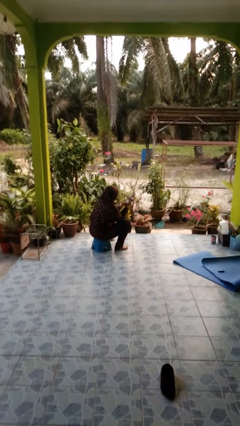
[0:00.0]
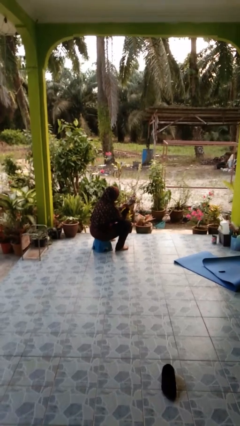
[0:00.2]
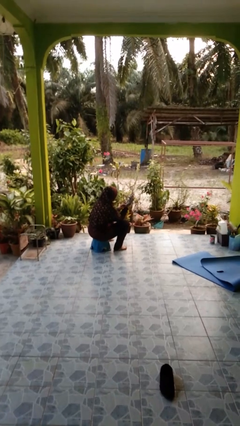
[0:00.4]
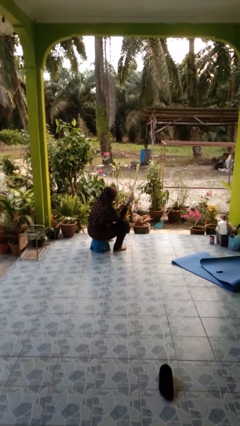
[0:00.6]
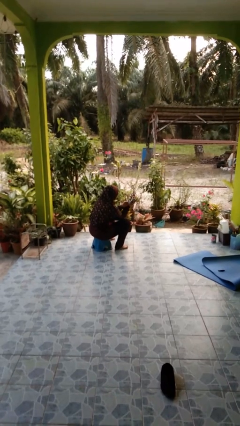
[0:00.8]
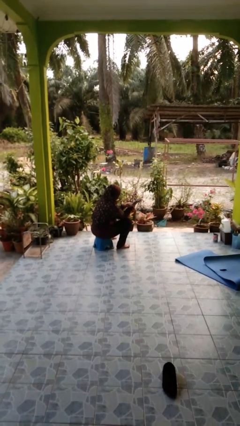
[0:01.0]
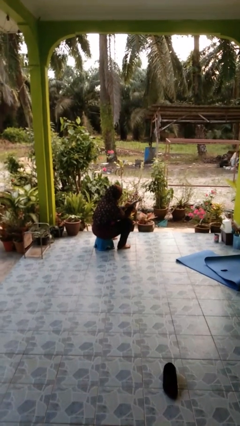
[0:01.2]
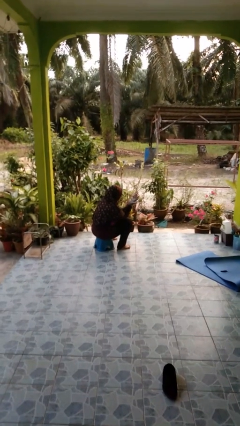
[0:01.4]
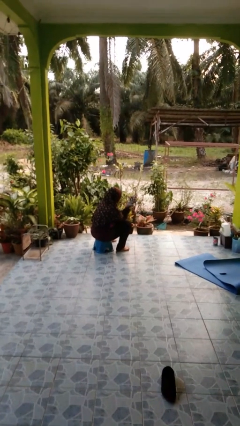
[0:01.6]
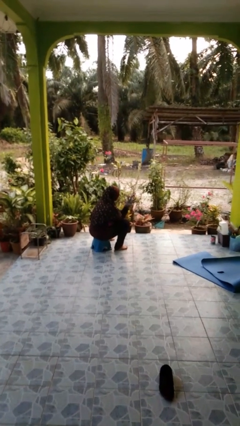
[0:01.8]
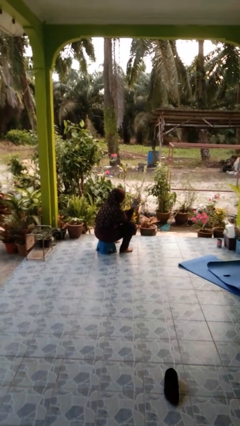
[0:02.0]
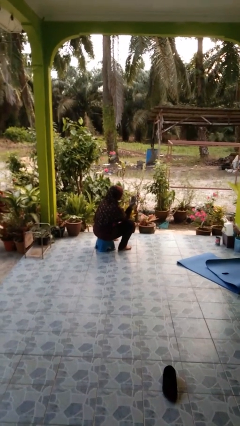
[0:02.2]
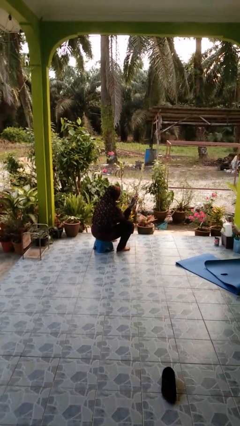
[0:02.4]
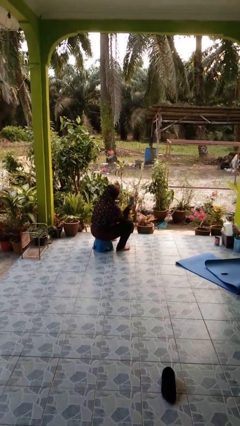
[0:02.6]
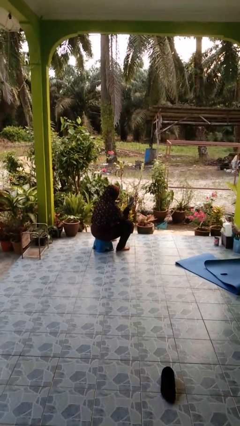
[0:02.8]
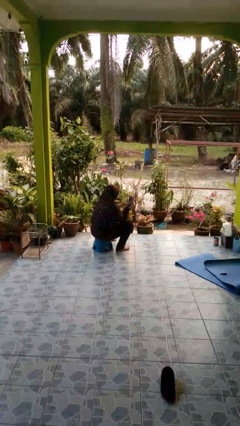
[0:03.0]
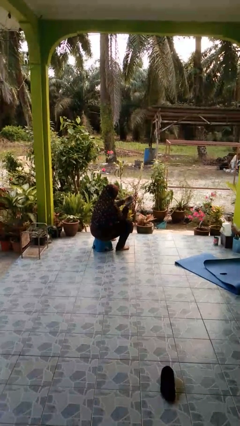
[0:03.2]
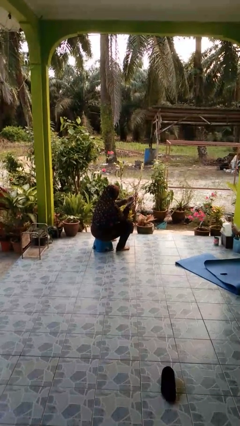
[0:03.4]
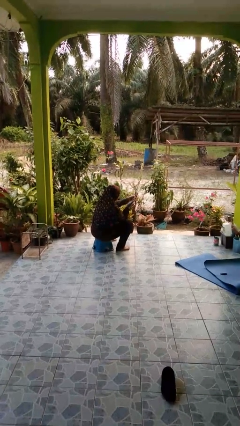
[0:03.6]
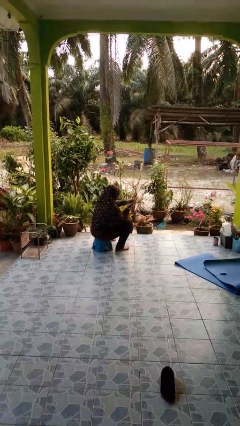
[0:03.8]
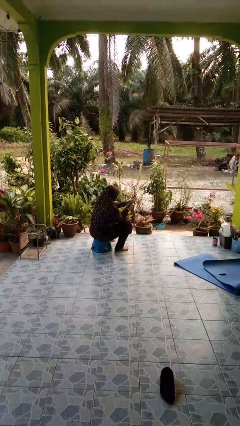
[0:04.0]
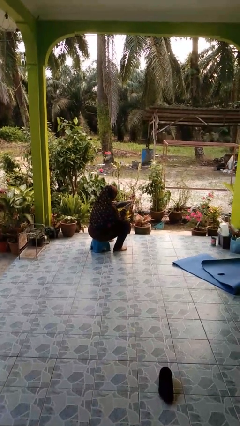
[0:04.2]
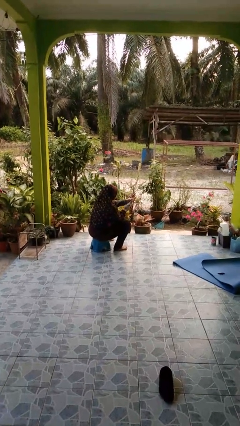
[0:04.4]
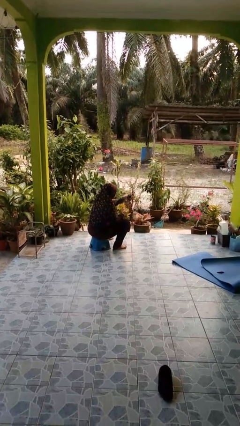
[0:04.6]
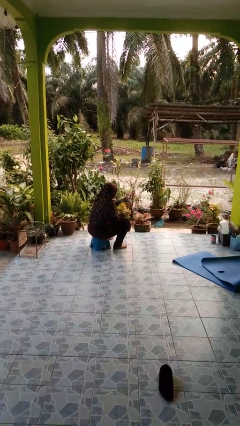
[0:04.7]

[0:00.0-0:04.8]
person puts on gloves

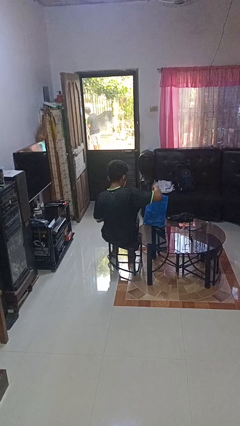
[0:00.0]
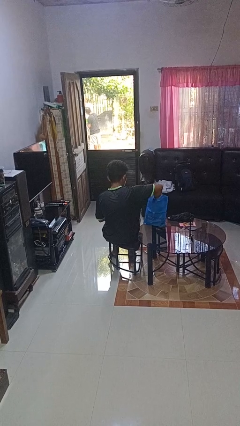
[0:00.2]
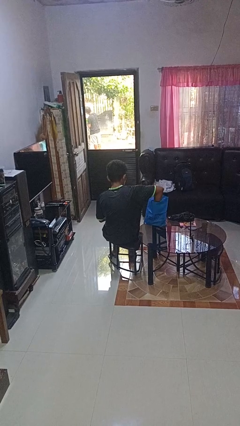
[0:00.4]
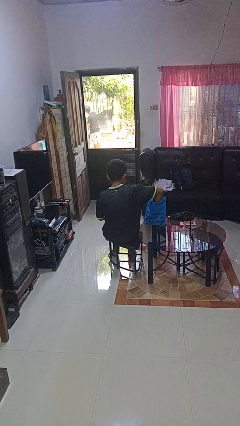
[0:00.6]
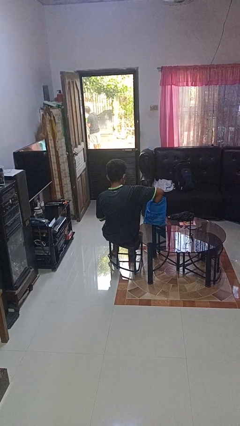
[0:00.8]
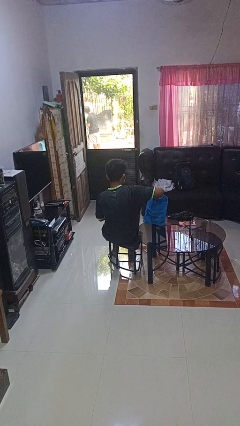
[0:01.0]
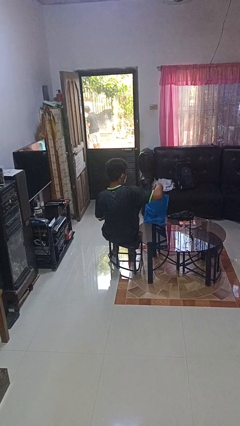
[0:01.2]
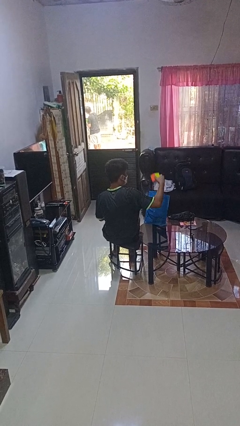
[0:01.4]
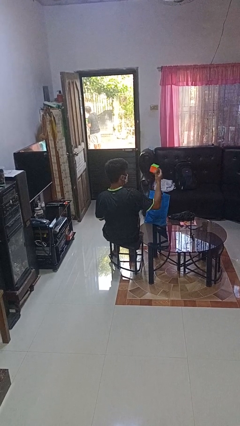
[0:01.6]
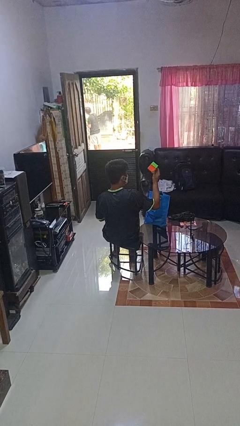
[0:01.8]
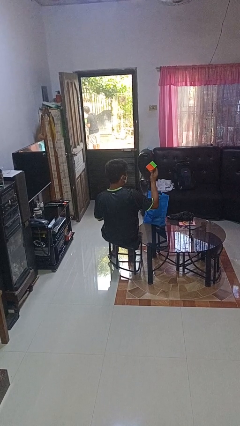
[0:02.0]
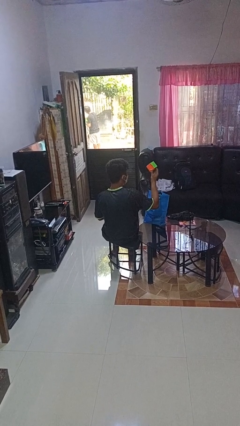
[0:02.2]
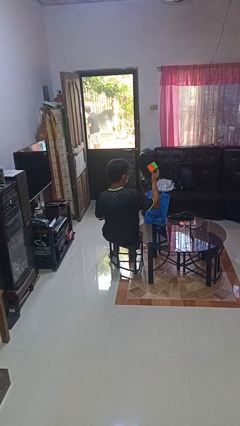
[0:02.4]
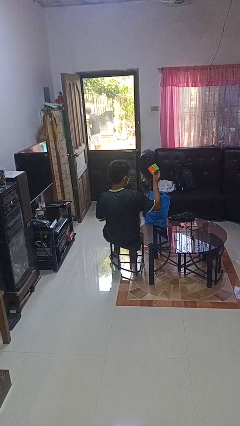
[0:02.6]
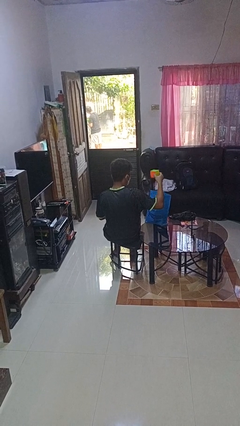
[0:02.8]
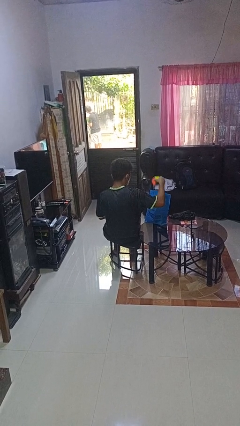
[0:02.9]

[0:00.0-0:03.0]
person takes object from bag

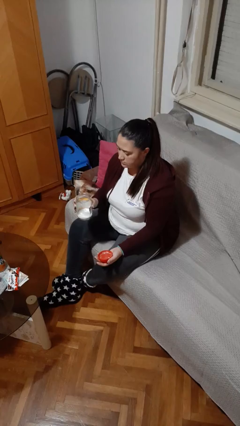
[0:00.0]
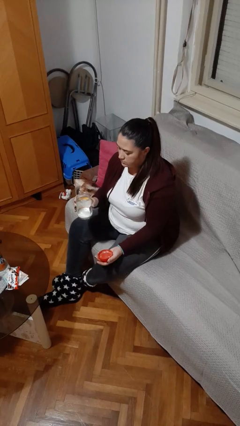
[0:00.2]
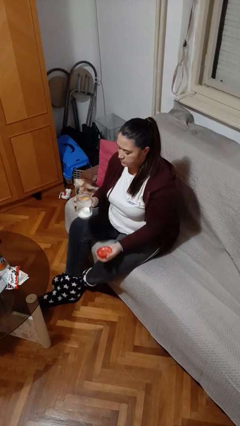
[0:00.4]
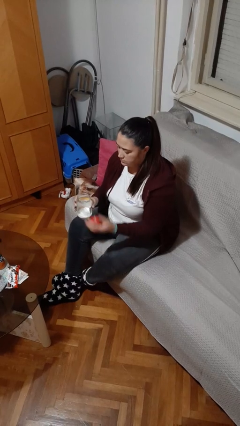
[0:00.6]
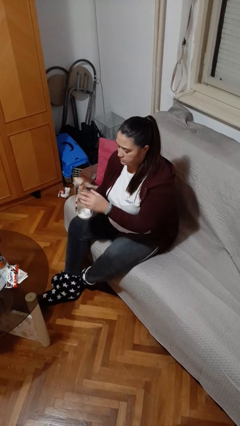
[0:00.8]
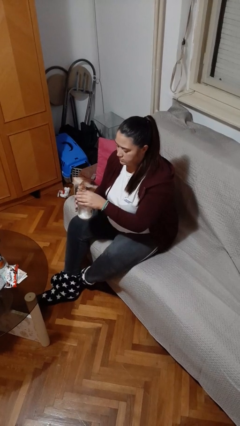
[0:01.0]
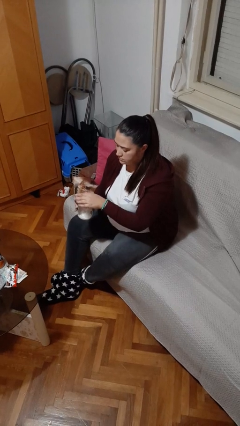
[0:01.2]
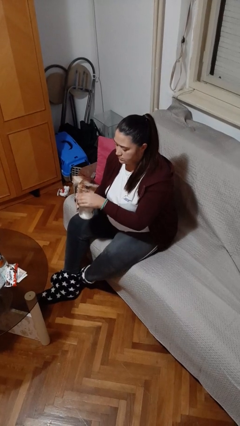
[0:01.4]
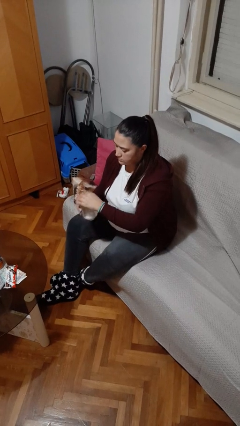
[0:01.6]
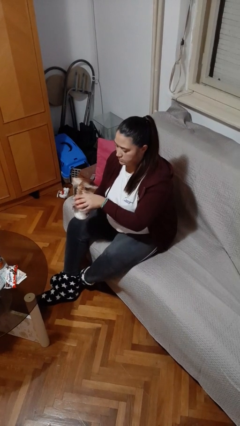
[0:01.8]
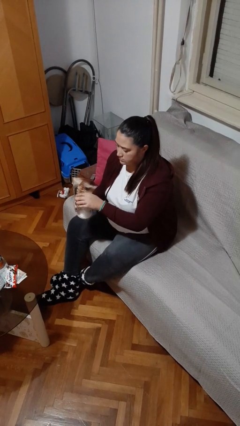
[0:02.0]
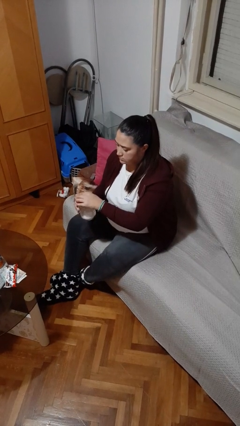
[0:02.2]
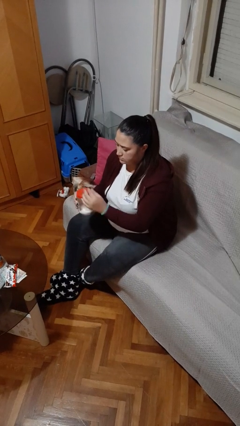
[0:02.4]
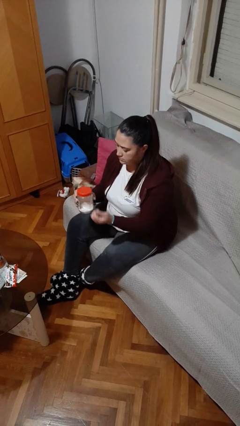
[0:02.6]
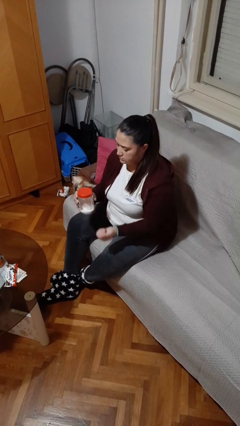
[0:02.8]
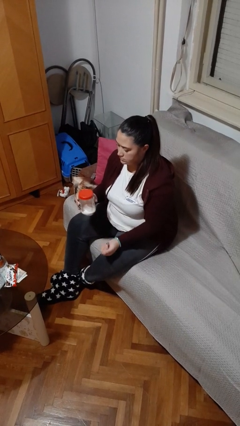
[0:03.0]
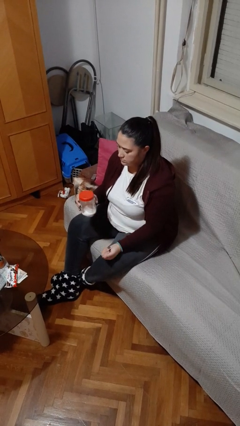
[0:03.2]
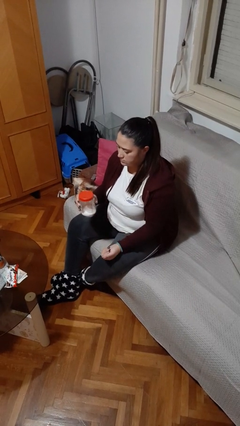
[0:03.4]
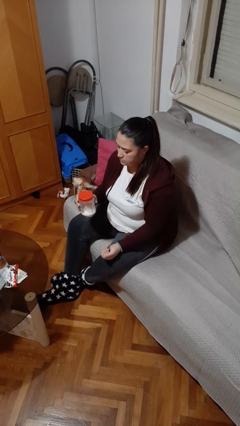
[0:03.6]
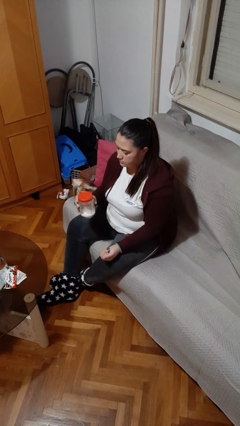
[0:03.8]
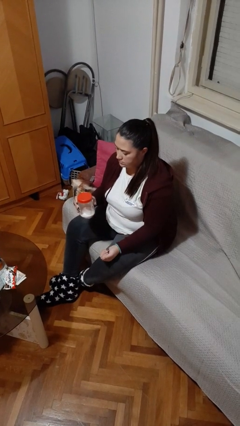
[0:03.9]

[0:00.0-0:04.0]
person closes jar

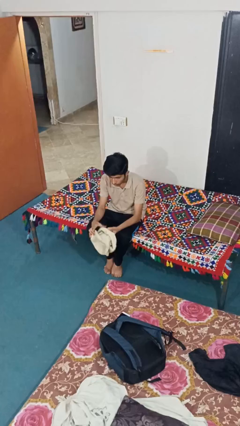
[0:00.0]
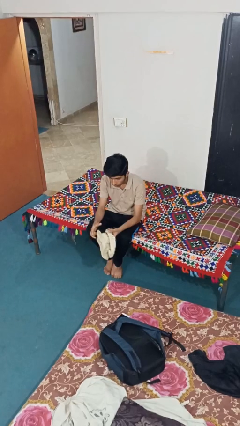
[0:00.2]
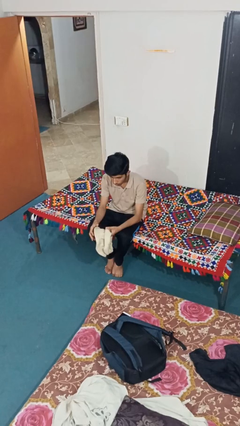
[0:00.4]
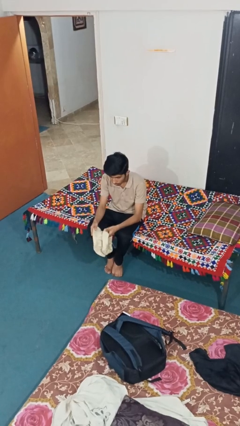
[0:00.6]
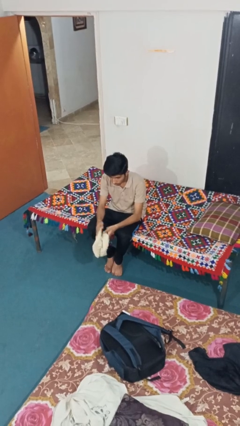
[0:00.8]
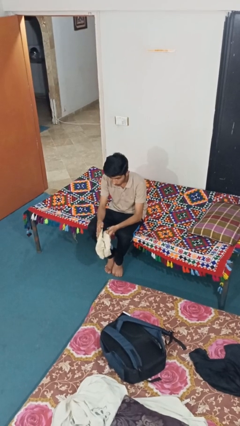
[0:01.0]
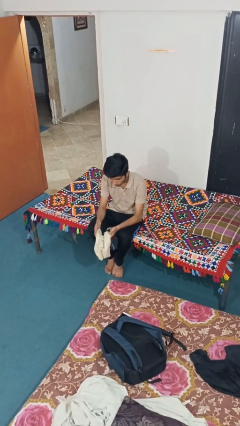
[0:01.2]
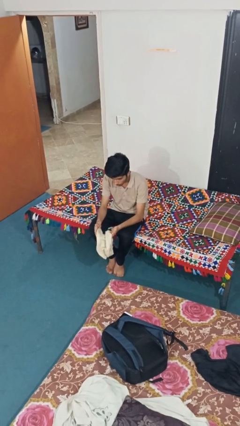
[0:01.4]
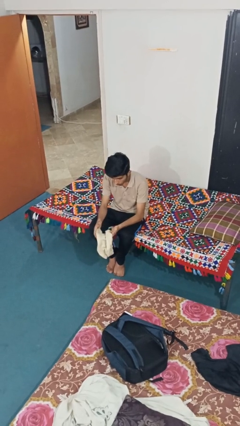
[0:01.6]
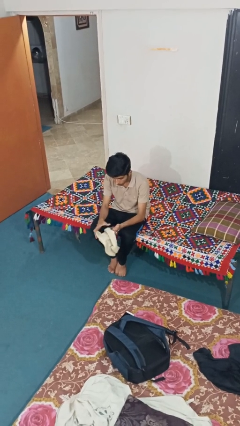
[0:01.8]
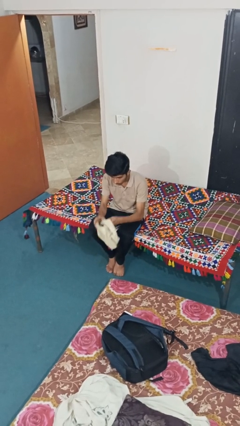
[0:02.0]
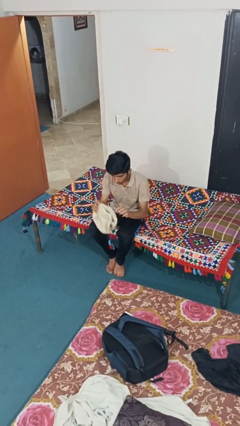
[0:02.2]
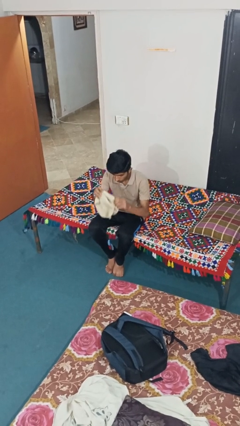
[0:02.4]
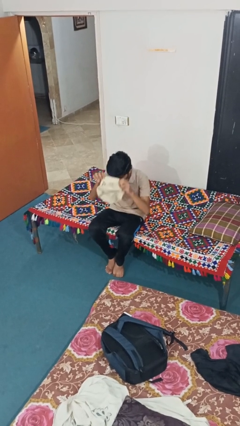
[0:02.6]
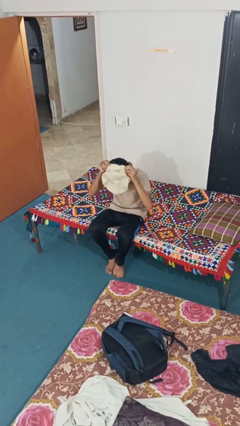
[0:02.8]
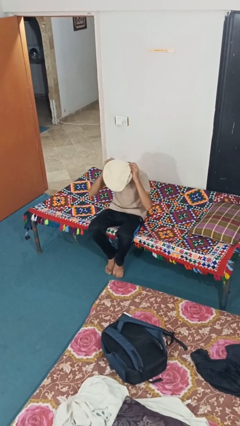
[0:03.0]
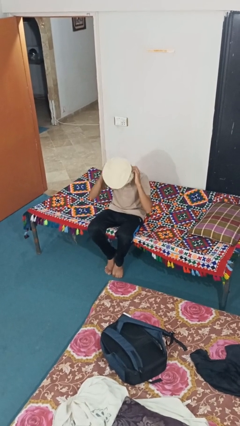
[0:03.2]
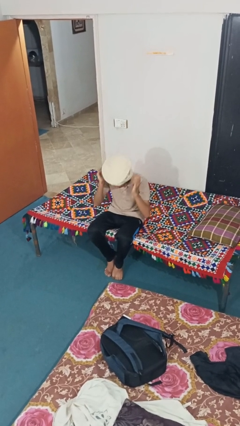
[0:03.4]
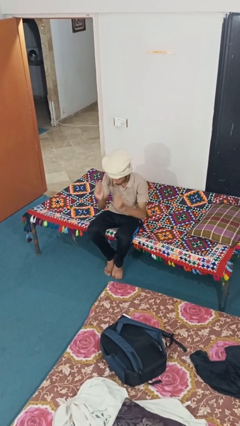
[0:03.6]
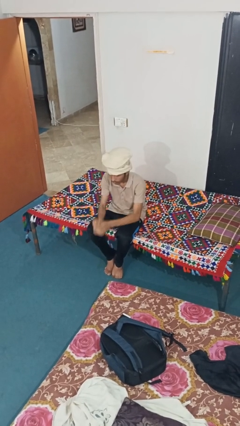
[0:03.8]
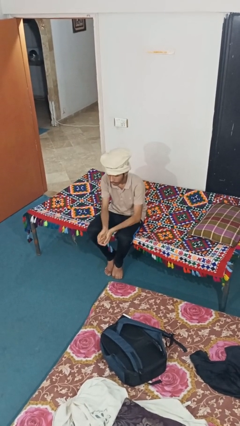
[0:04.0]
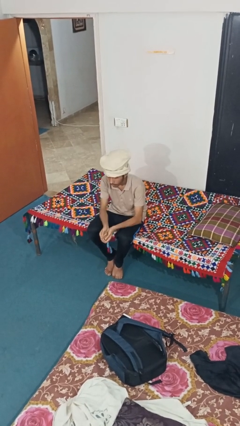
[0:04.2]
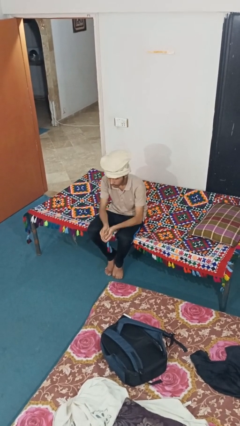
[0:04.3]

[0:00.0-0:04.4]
person puts on hat

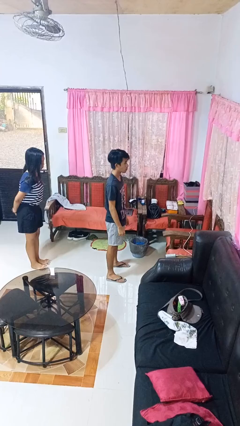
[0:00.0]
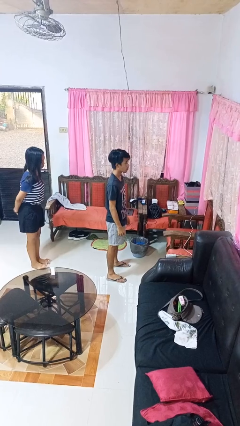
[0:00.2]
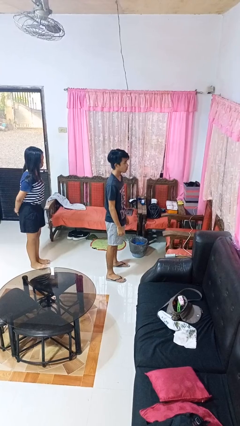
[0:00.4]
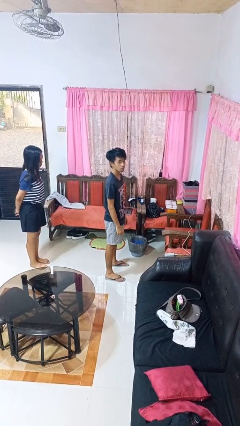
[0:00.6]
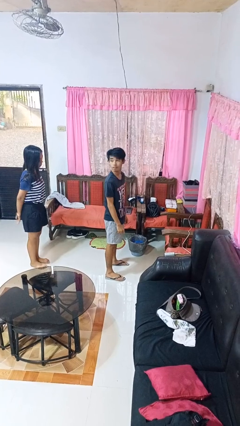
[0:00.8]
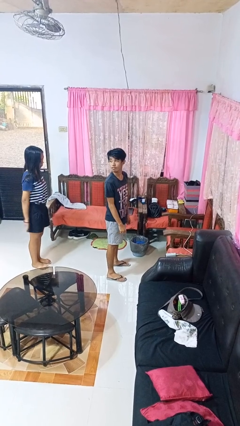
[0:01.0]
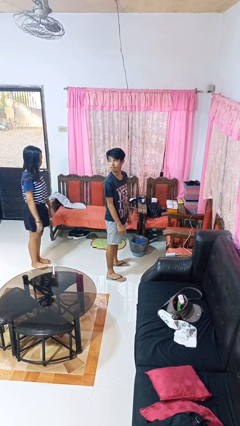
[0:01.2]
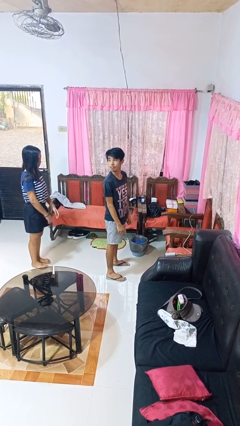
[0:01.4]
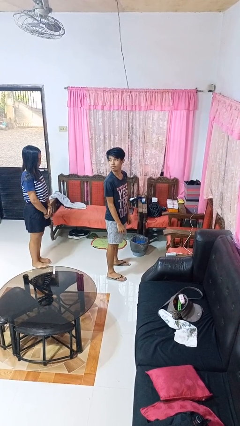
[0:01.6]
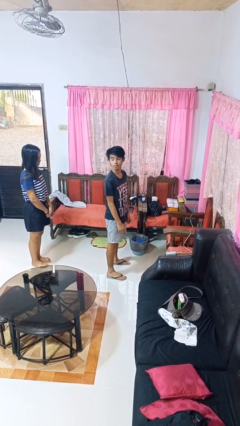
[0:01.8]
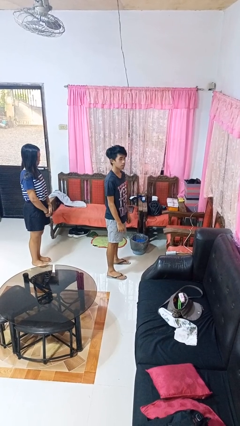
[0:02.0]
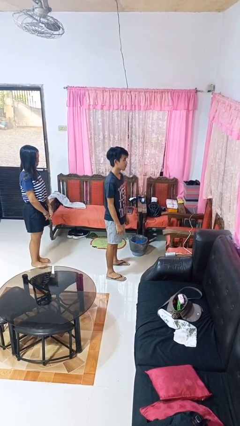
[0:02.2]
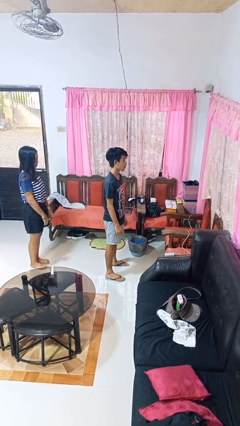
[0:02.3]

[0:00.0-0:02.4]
person looks over shoulder
